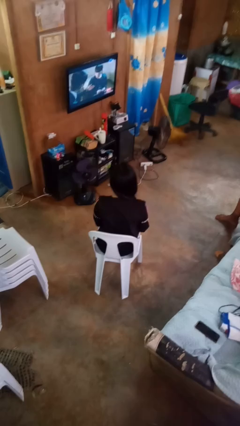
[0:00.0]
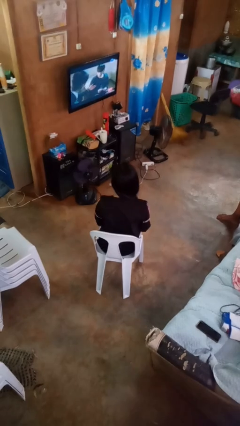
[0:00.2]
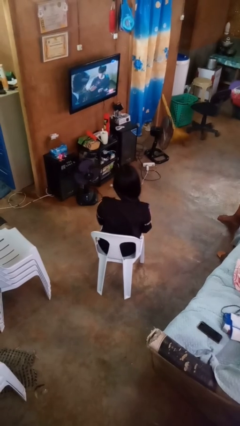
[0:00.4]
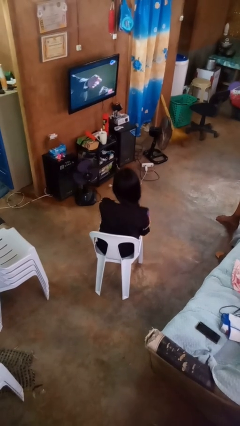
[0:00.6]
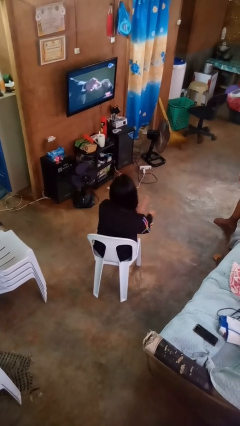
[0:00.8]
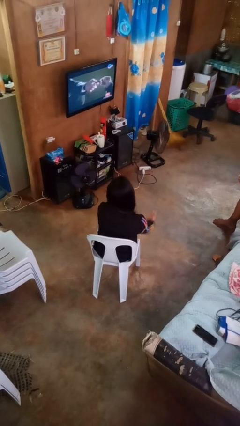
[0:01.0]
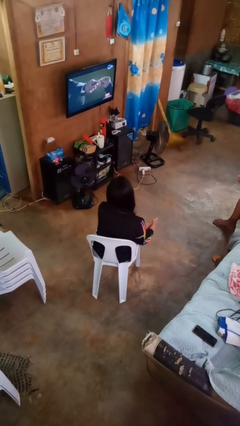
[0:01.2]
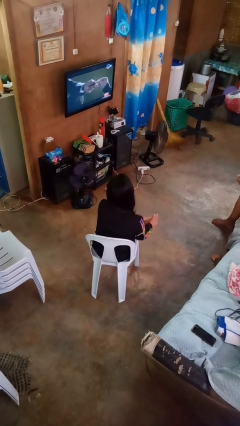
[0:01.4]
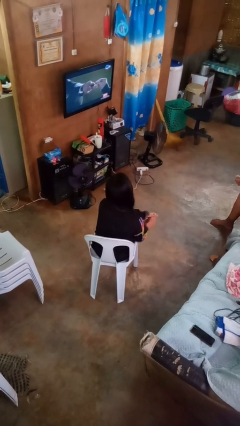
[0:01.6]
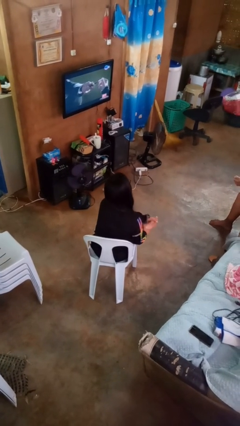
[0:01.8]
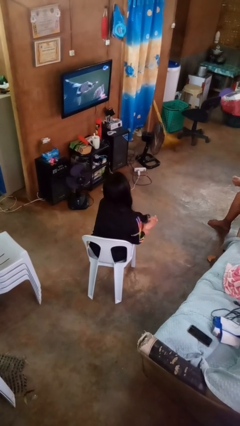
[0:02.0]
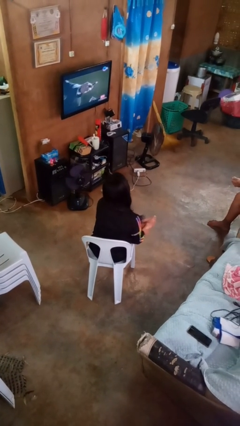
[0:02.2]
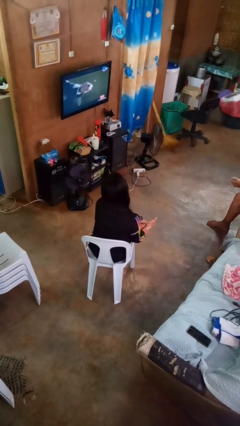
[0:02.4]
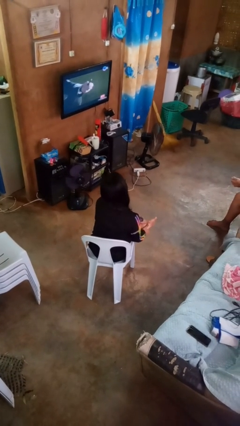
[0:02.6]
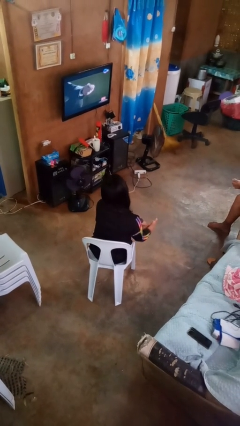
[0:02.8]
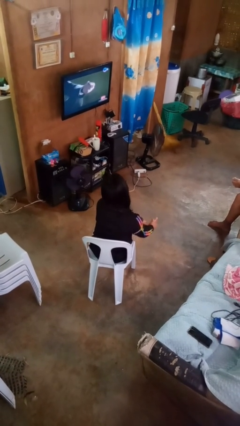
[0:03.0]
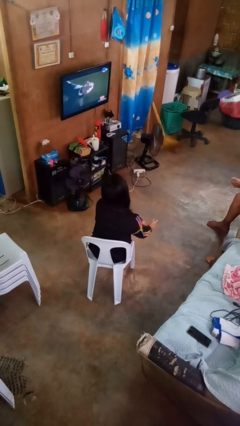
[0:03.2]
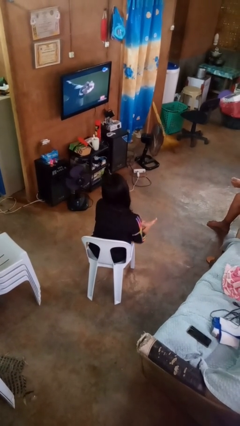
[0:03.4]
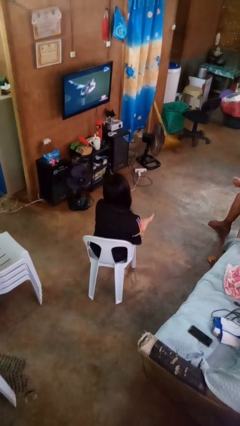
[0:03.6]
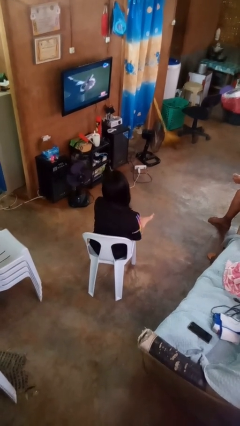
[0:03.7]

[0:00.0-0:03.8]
person rubs foot

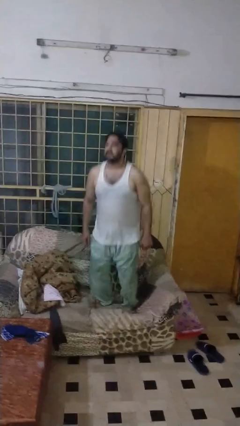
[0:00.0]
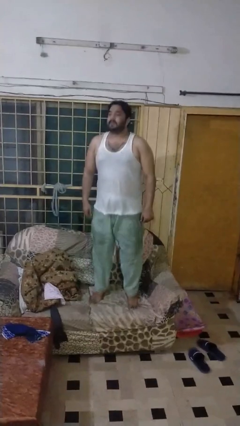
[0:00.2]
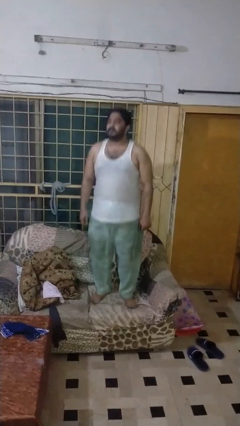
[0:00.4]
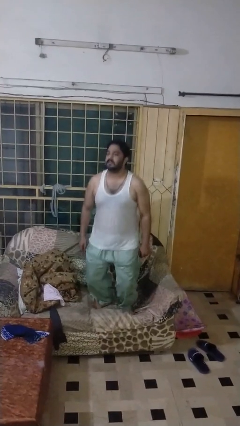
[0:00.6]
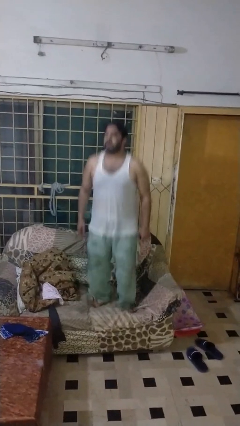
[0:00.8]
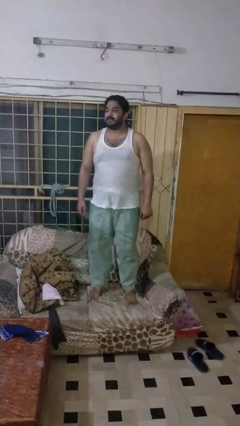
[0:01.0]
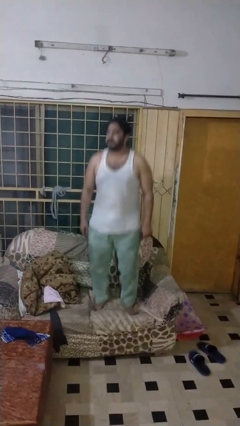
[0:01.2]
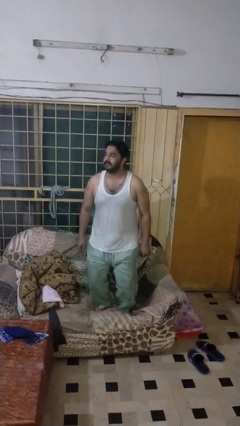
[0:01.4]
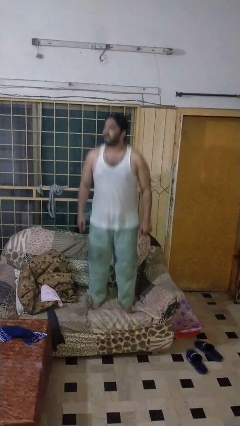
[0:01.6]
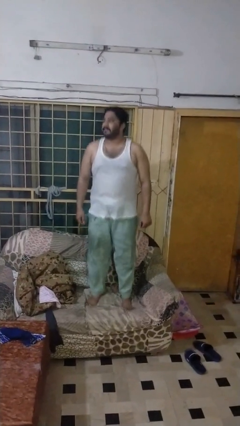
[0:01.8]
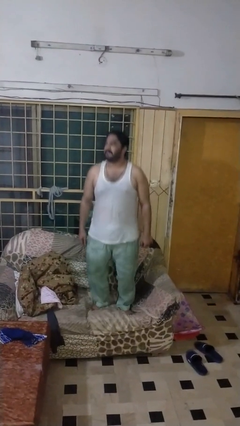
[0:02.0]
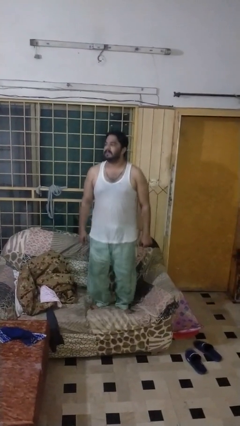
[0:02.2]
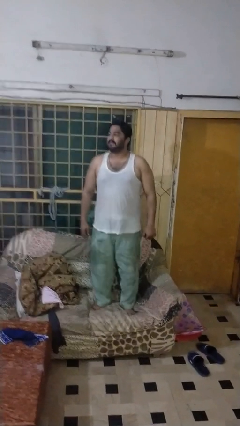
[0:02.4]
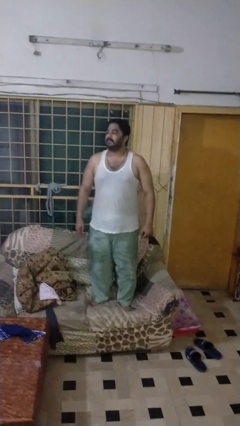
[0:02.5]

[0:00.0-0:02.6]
person jumps on couch

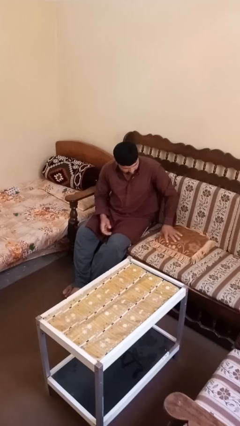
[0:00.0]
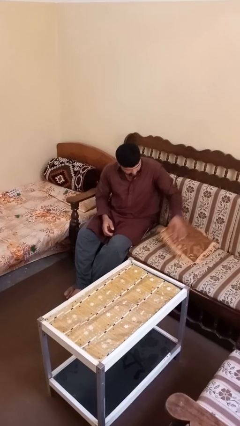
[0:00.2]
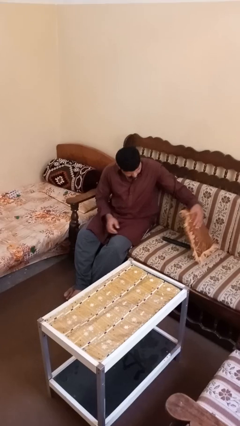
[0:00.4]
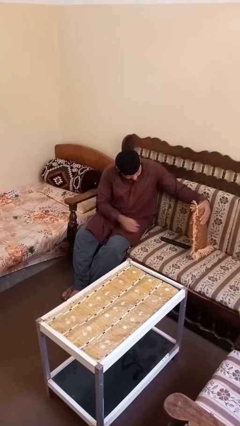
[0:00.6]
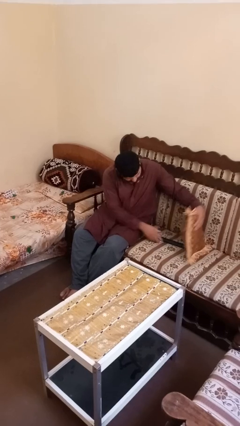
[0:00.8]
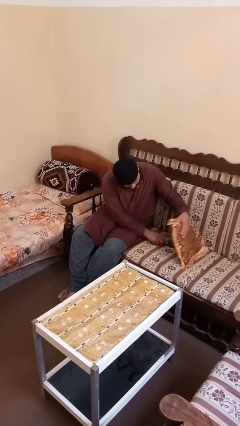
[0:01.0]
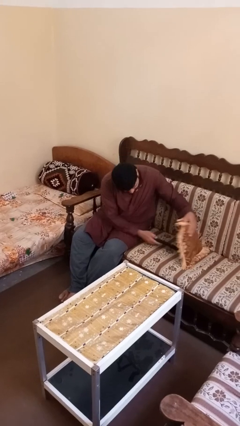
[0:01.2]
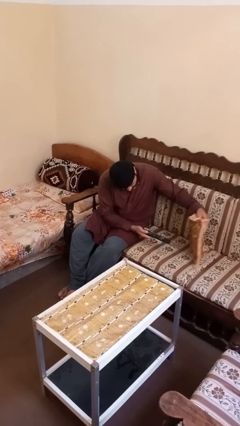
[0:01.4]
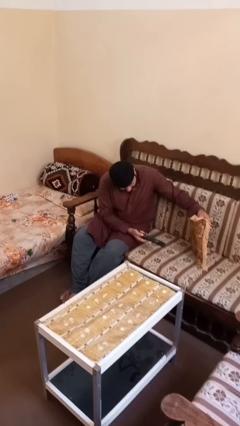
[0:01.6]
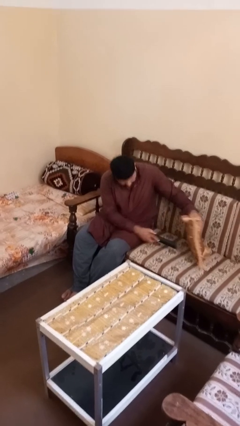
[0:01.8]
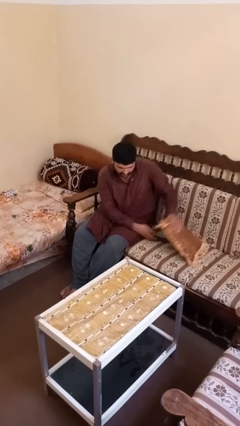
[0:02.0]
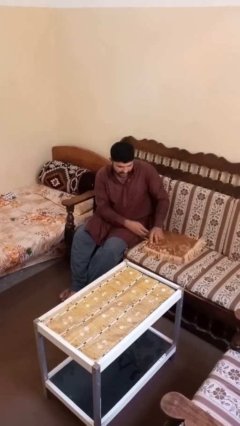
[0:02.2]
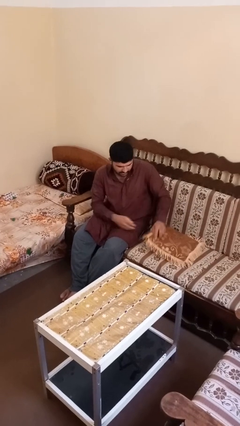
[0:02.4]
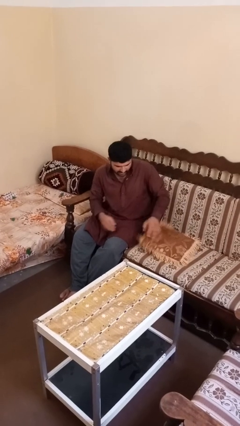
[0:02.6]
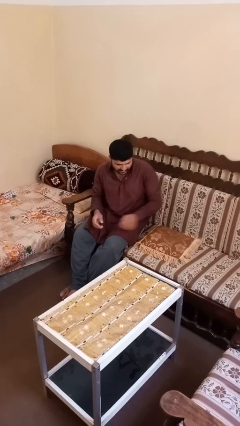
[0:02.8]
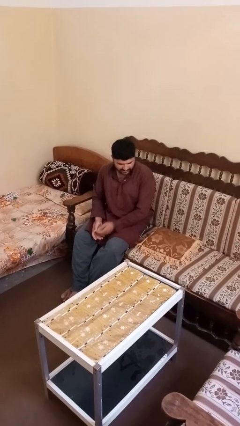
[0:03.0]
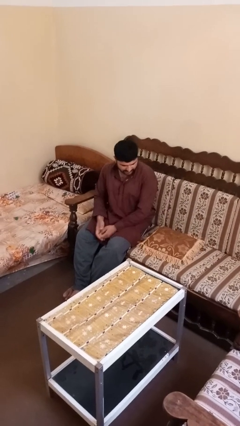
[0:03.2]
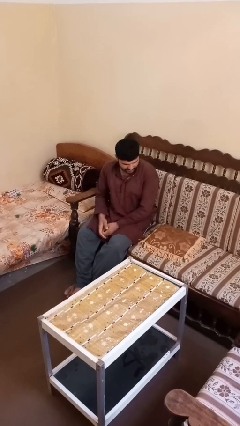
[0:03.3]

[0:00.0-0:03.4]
person searches in couch

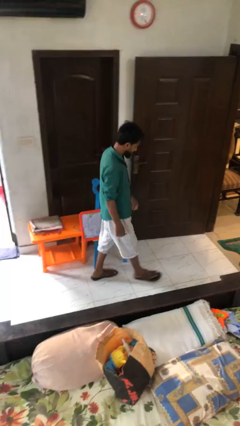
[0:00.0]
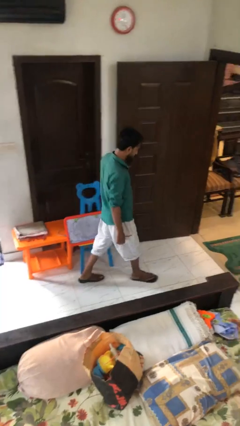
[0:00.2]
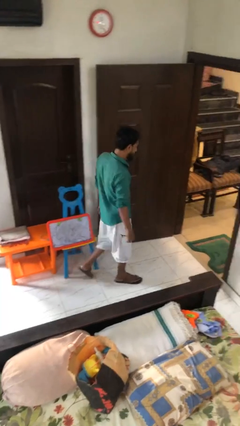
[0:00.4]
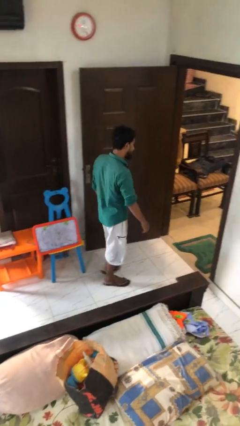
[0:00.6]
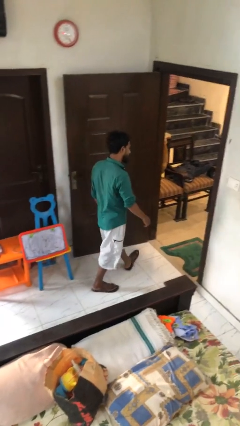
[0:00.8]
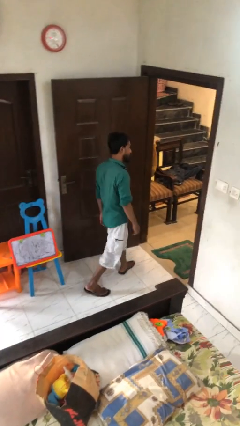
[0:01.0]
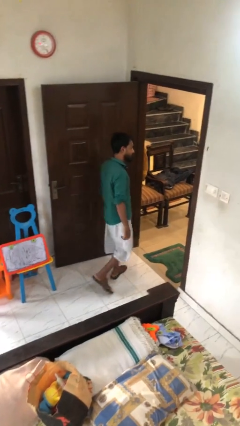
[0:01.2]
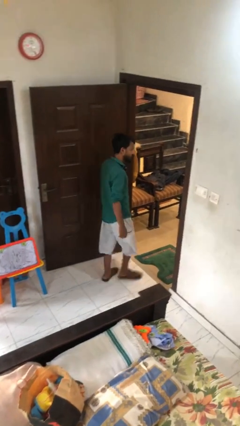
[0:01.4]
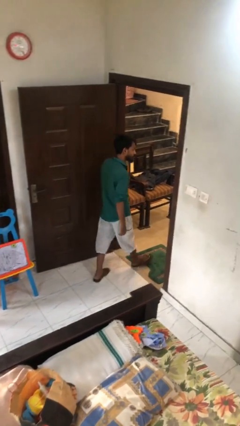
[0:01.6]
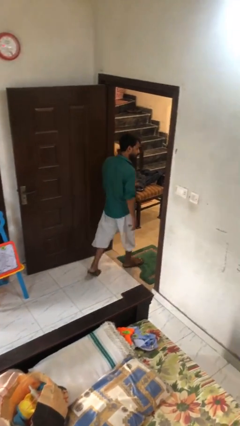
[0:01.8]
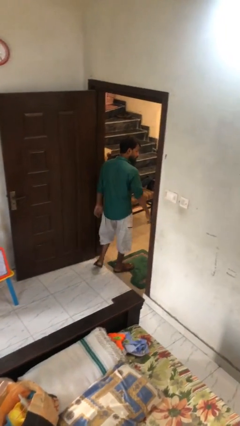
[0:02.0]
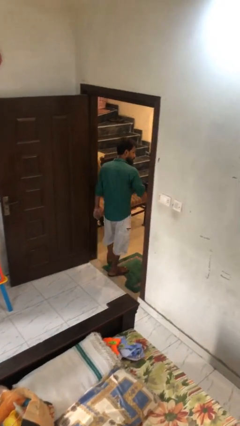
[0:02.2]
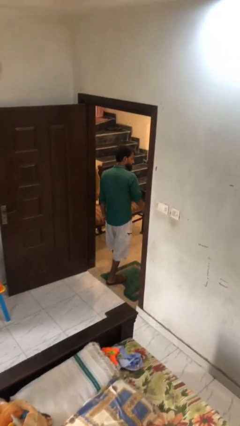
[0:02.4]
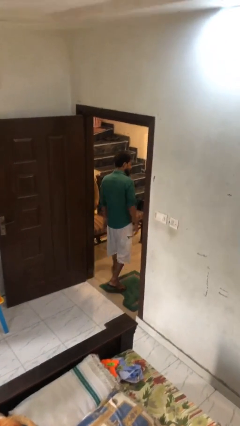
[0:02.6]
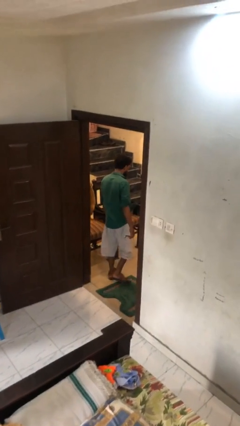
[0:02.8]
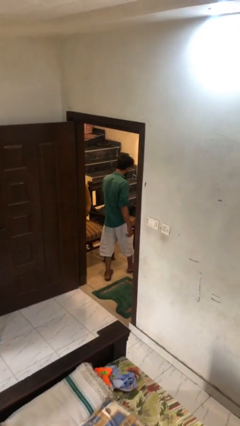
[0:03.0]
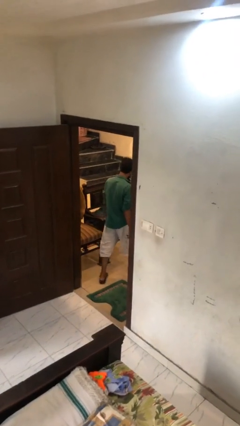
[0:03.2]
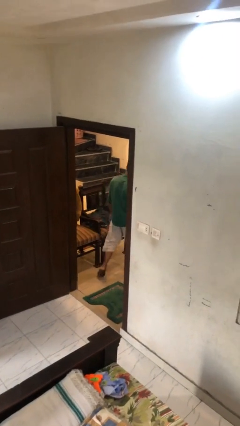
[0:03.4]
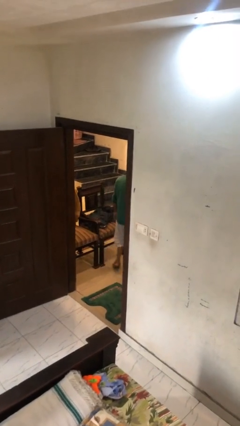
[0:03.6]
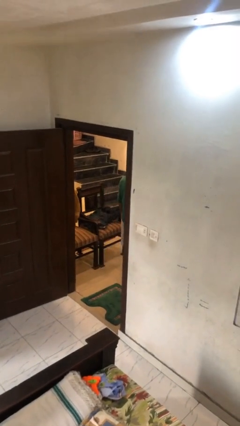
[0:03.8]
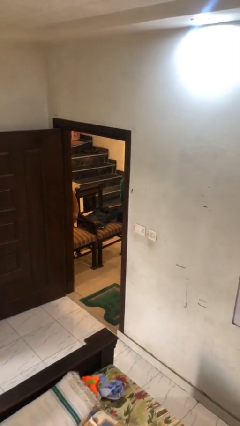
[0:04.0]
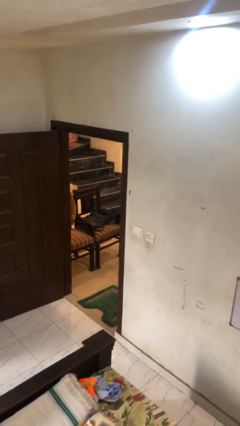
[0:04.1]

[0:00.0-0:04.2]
person exits scene through structure

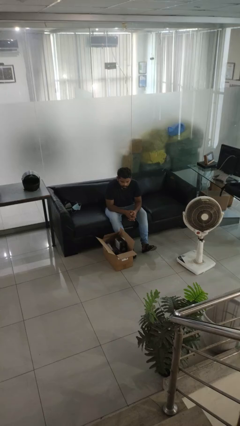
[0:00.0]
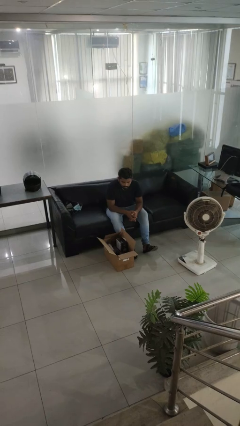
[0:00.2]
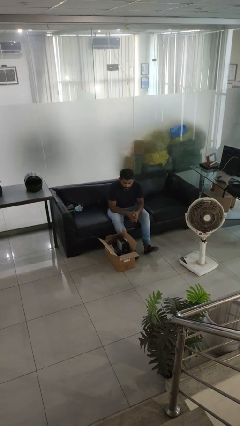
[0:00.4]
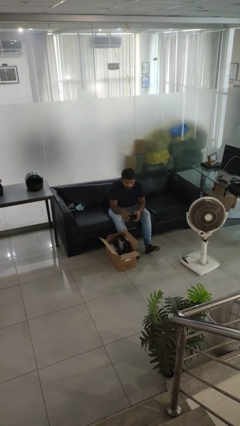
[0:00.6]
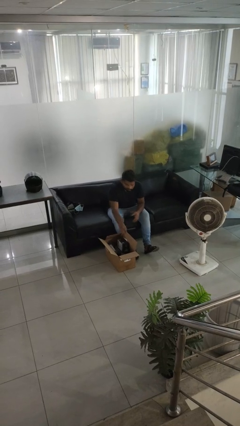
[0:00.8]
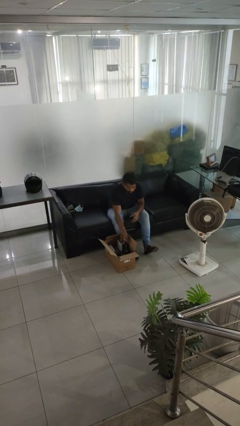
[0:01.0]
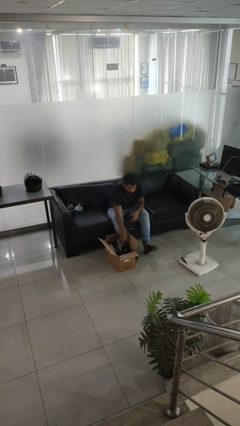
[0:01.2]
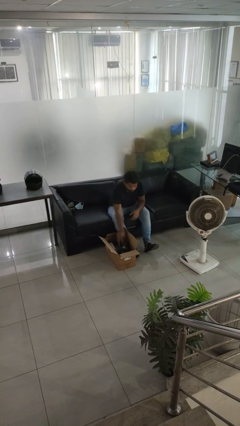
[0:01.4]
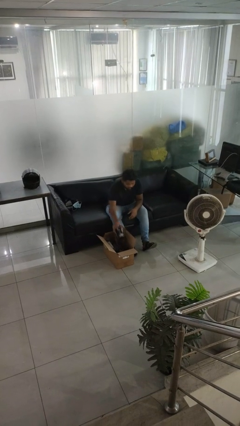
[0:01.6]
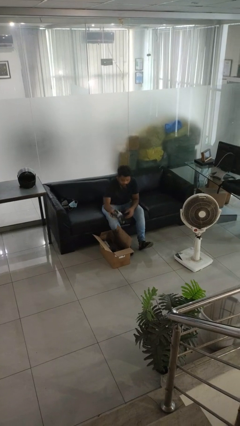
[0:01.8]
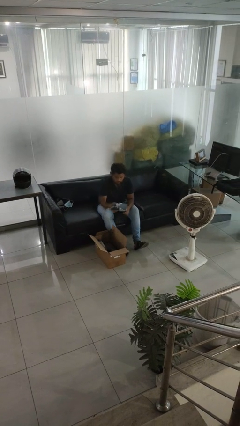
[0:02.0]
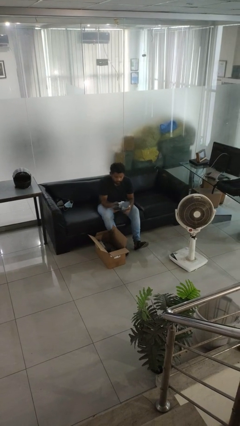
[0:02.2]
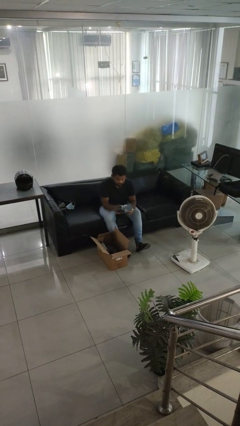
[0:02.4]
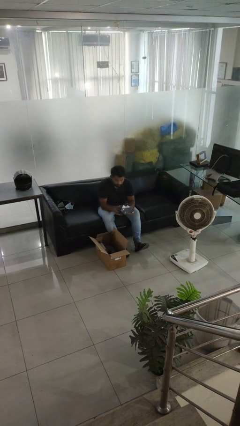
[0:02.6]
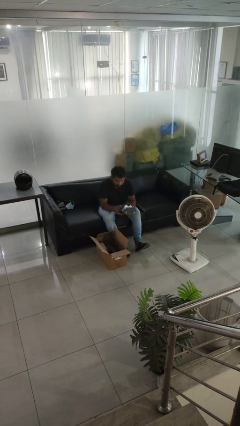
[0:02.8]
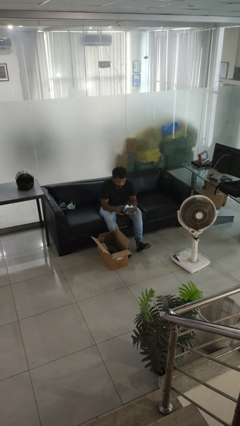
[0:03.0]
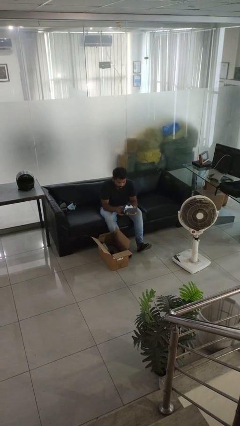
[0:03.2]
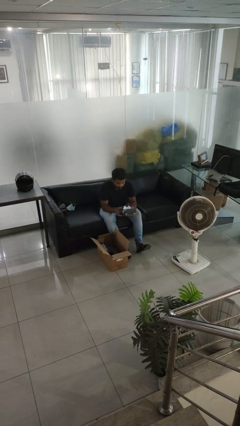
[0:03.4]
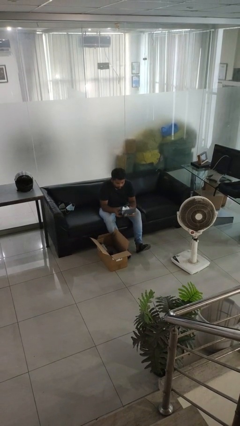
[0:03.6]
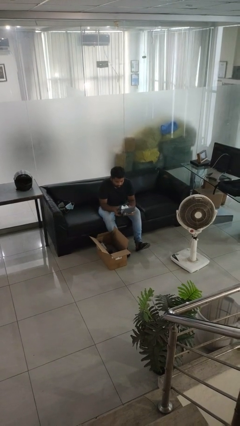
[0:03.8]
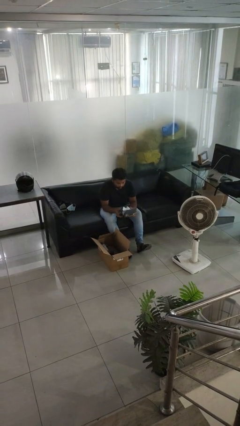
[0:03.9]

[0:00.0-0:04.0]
person puts object into box
